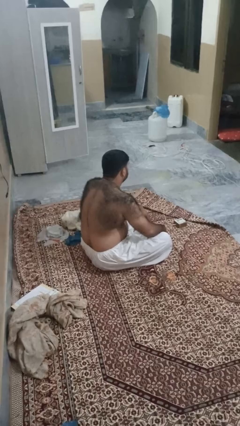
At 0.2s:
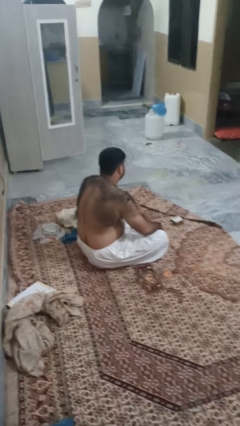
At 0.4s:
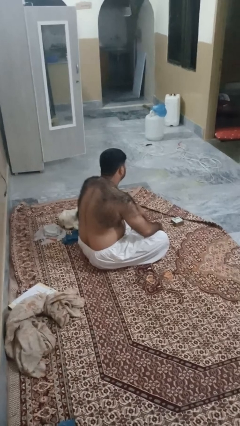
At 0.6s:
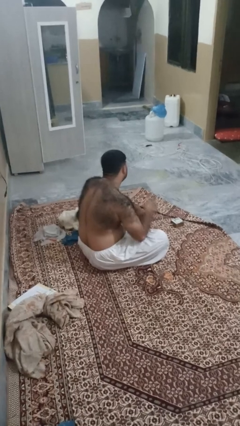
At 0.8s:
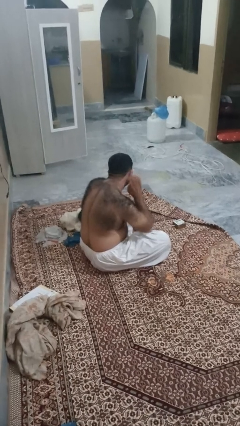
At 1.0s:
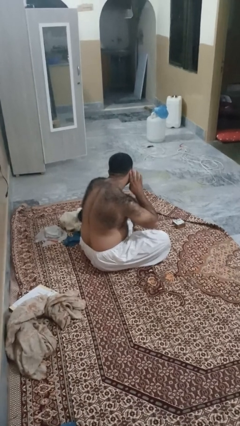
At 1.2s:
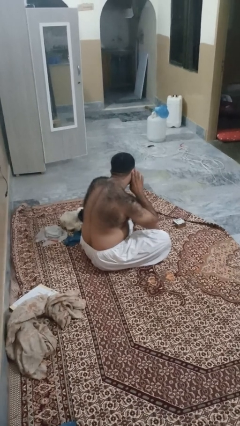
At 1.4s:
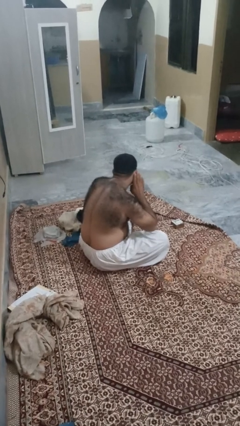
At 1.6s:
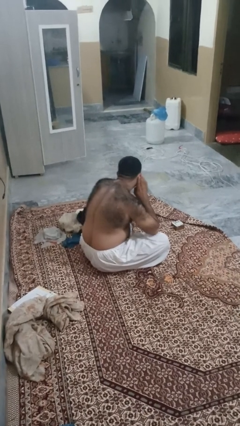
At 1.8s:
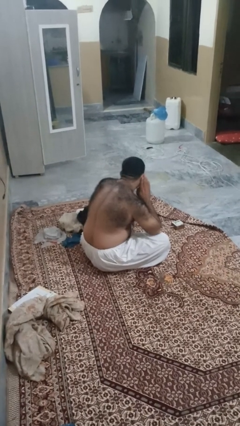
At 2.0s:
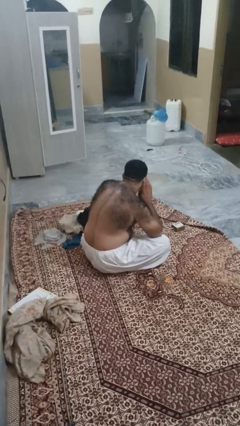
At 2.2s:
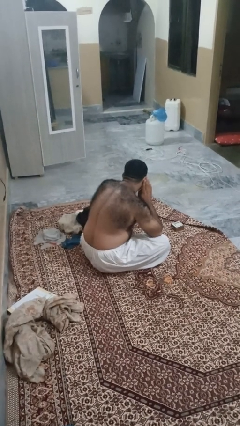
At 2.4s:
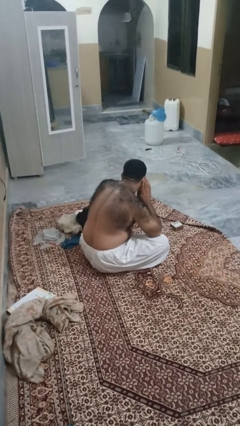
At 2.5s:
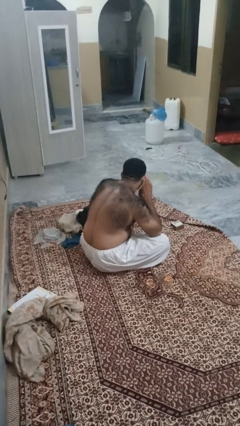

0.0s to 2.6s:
person gestures listen closely

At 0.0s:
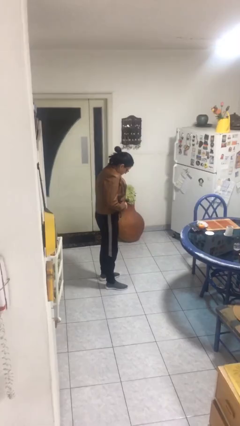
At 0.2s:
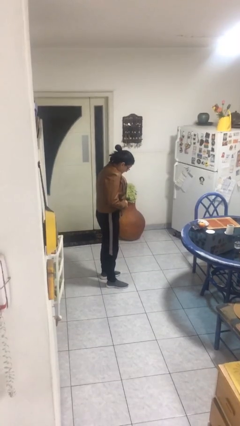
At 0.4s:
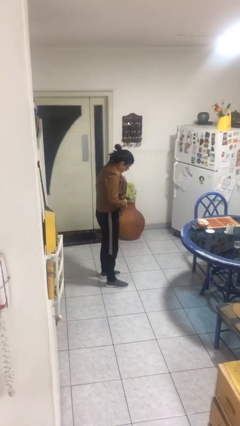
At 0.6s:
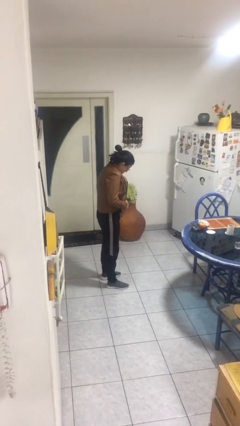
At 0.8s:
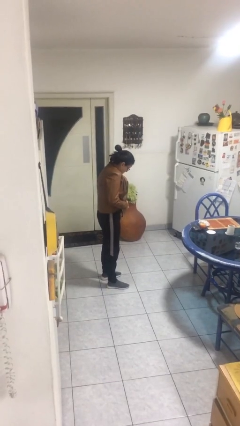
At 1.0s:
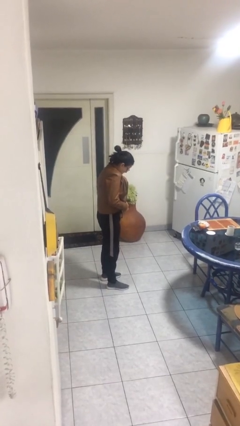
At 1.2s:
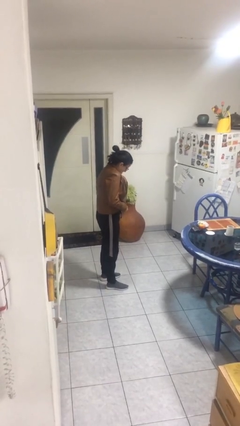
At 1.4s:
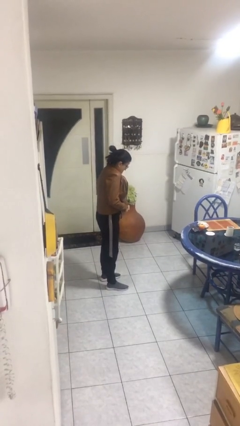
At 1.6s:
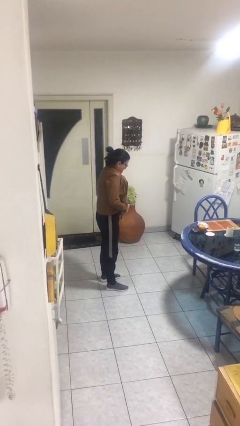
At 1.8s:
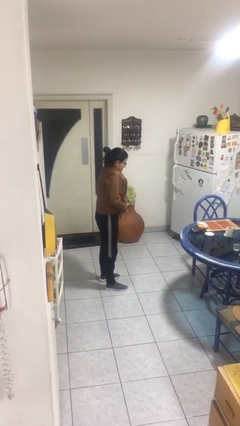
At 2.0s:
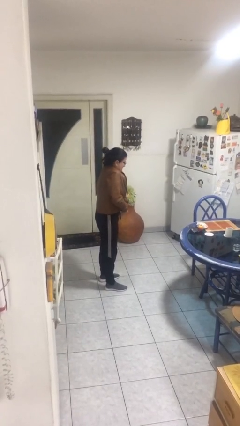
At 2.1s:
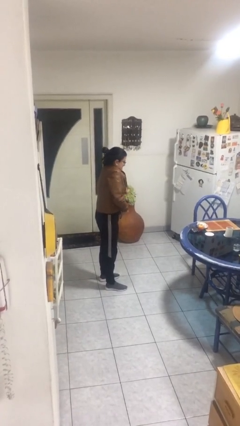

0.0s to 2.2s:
person zips up jacket

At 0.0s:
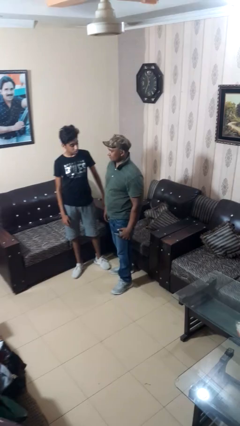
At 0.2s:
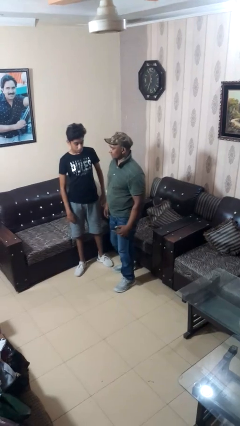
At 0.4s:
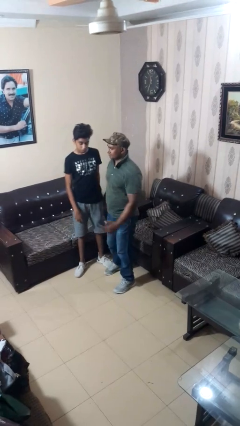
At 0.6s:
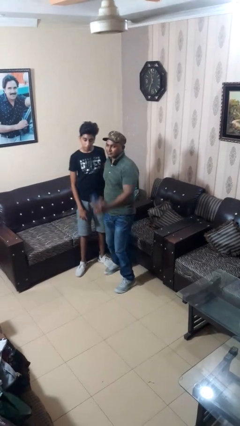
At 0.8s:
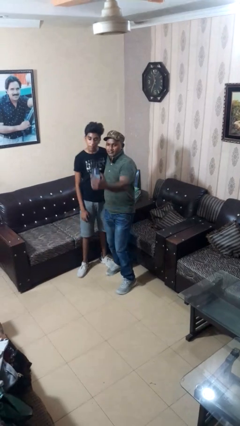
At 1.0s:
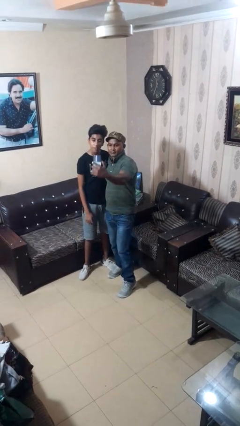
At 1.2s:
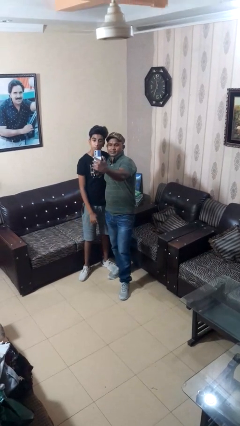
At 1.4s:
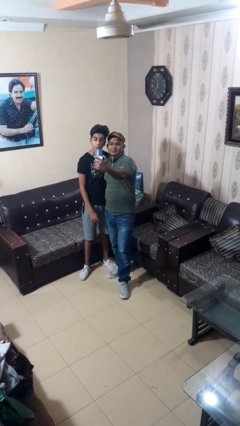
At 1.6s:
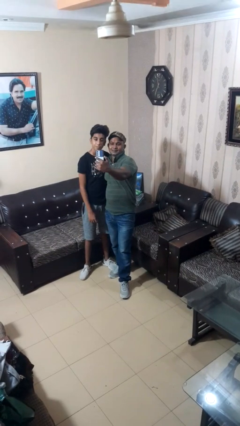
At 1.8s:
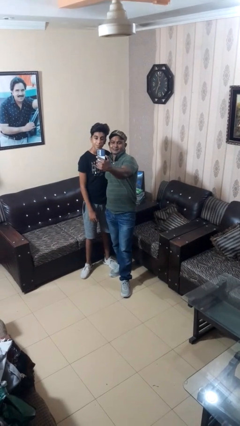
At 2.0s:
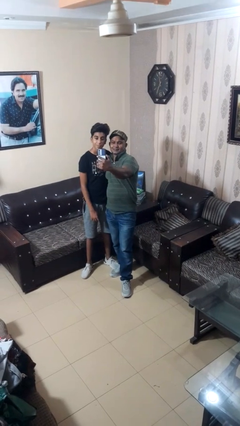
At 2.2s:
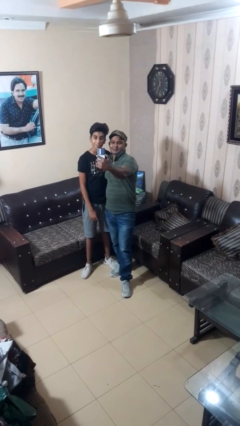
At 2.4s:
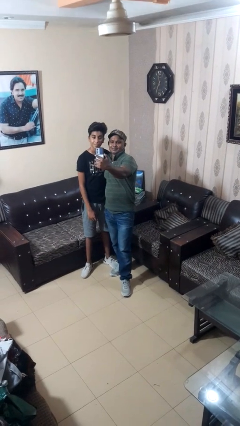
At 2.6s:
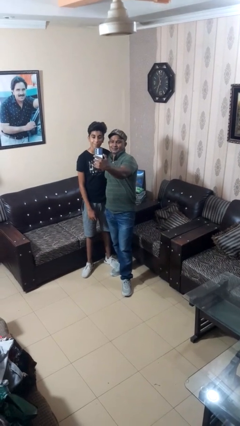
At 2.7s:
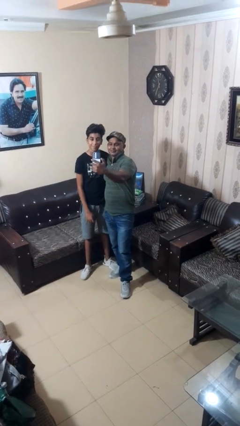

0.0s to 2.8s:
person takes selfie with person

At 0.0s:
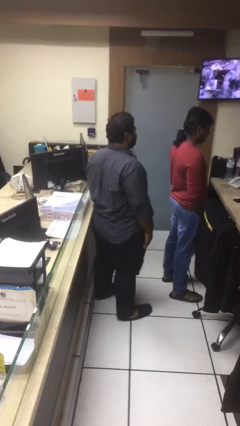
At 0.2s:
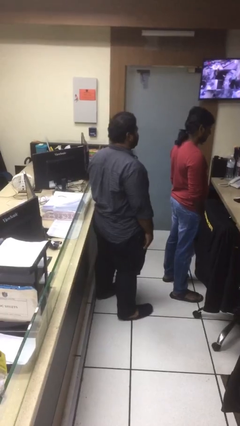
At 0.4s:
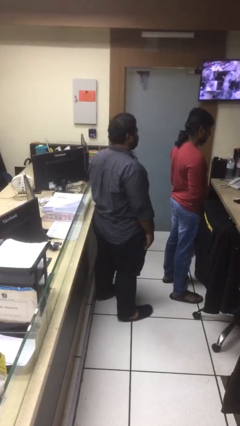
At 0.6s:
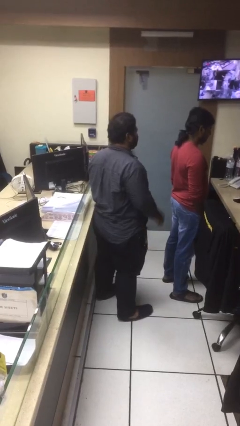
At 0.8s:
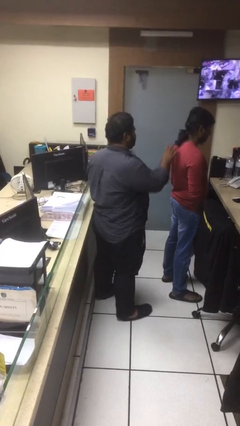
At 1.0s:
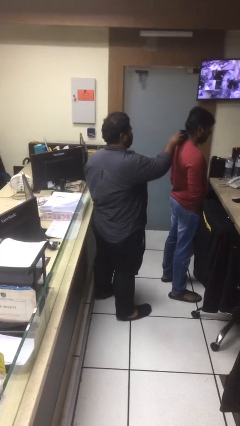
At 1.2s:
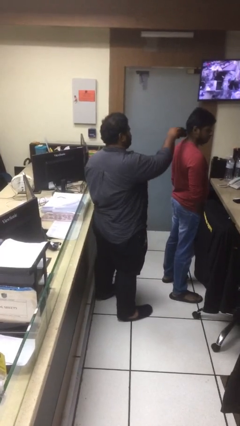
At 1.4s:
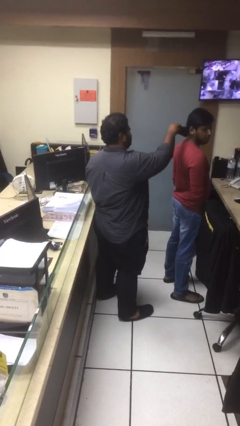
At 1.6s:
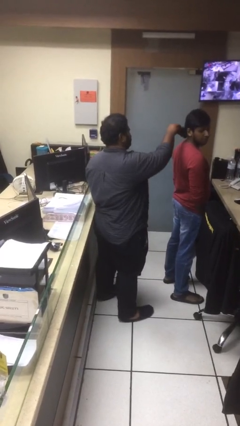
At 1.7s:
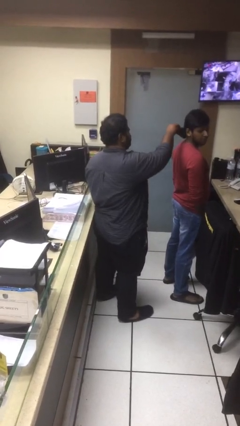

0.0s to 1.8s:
person grabs person by hair

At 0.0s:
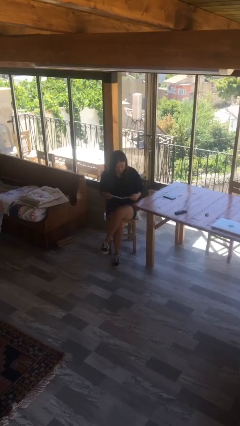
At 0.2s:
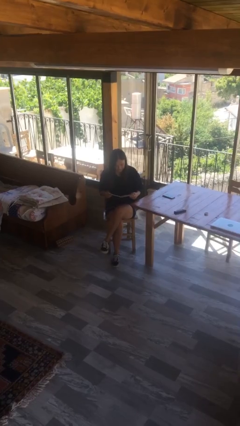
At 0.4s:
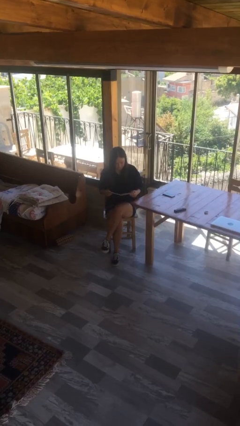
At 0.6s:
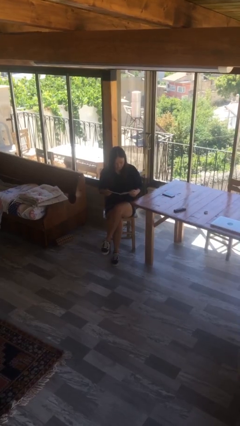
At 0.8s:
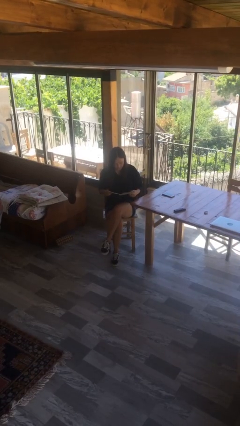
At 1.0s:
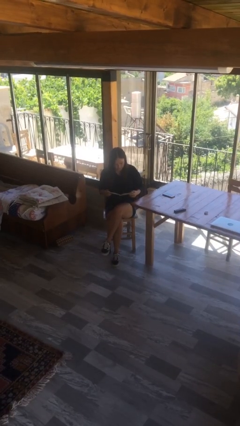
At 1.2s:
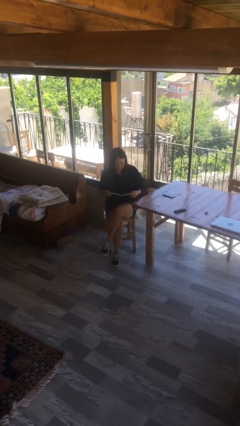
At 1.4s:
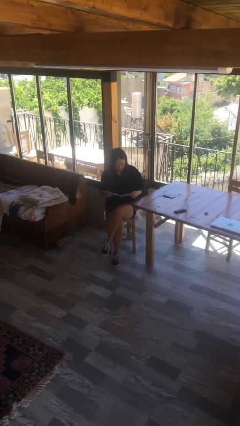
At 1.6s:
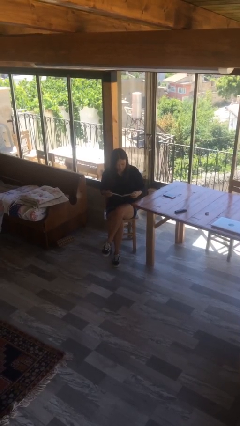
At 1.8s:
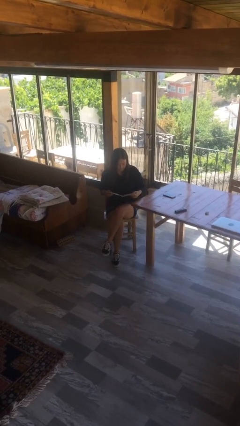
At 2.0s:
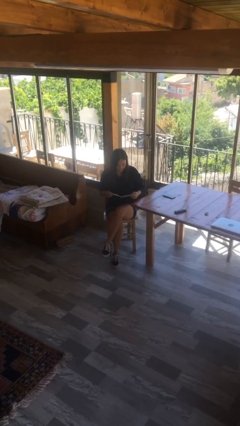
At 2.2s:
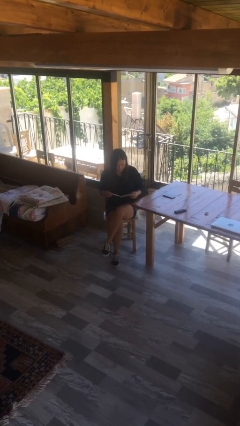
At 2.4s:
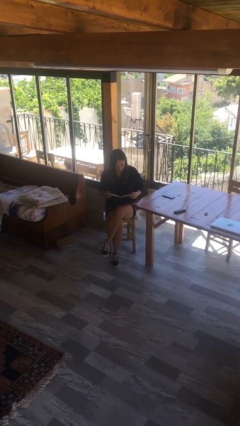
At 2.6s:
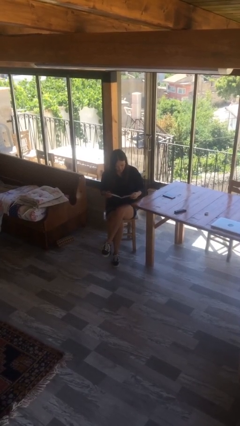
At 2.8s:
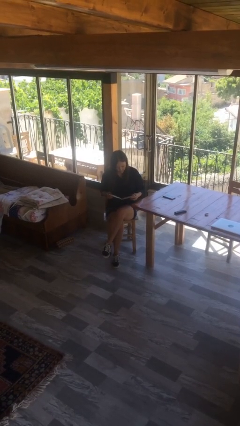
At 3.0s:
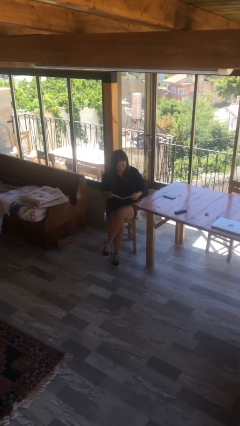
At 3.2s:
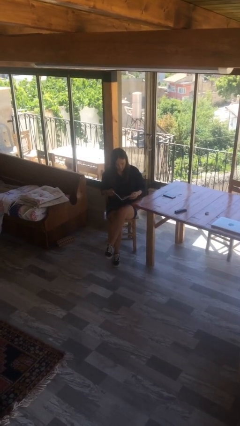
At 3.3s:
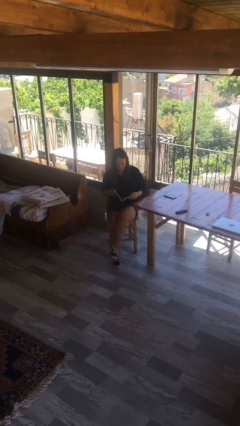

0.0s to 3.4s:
person reads document

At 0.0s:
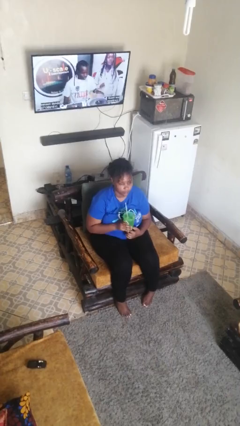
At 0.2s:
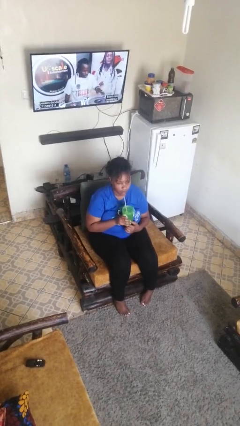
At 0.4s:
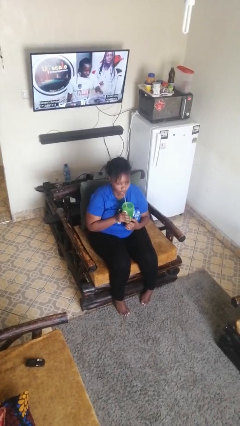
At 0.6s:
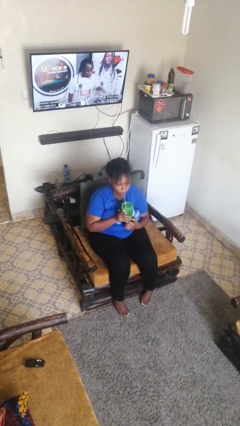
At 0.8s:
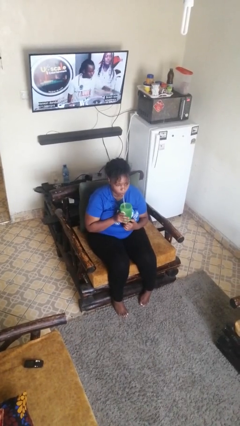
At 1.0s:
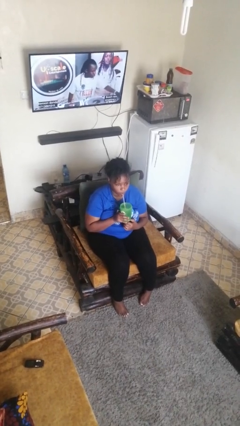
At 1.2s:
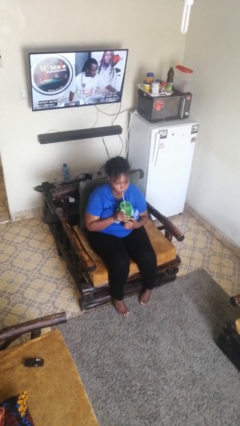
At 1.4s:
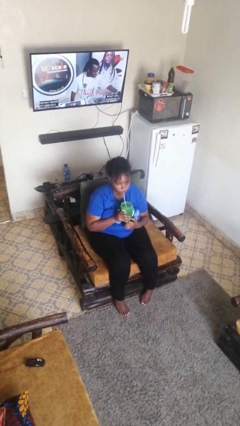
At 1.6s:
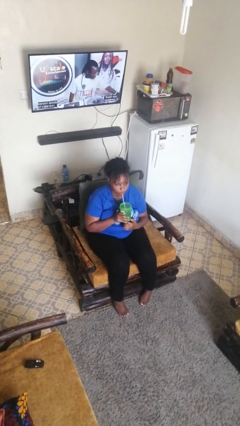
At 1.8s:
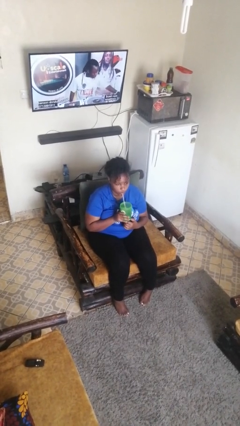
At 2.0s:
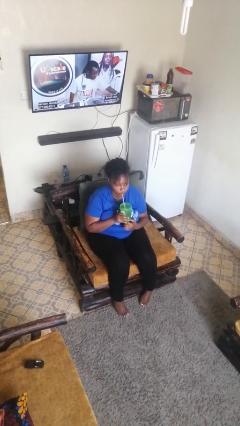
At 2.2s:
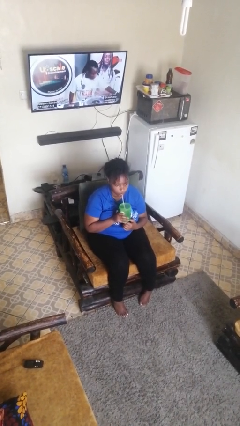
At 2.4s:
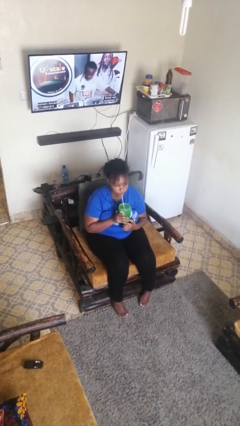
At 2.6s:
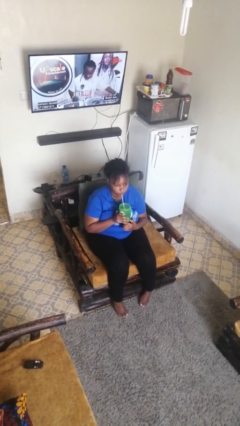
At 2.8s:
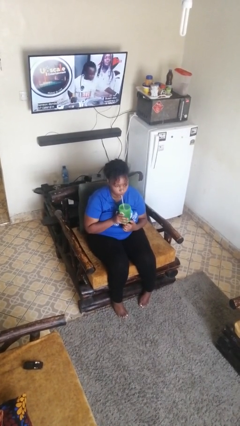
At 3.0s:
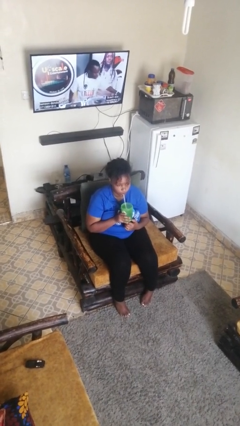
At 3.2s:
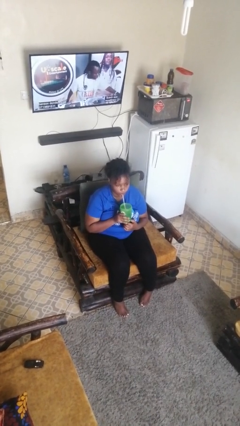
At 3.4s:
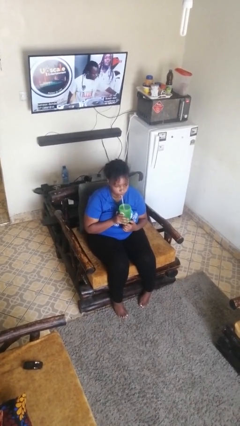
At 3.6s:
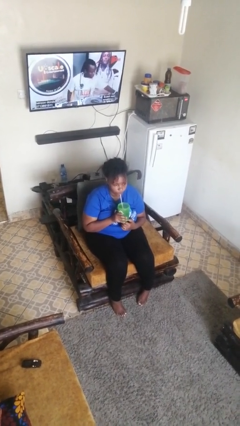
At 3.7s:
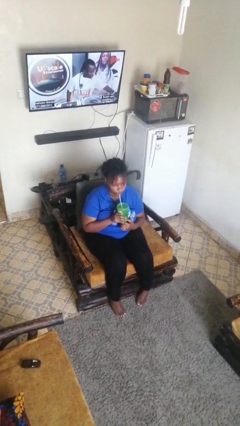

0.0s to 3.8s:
person drinks from straw

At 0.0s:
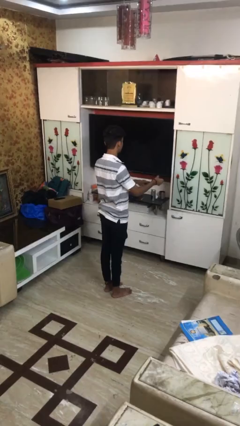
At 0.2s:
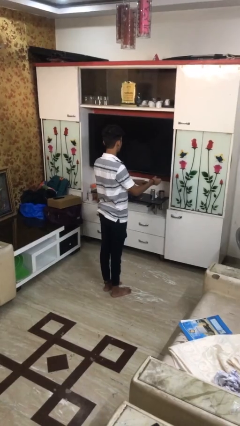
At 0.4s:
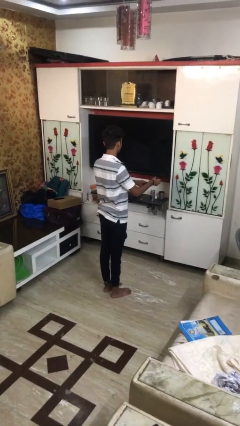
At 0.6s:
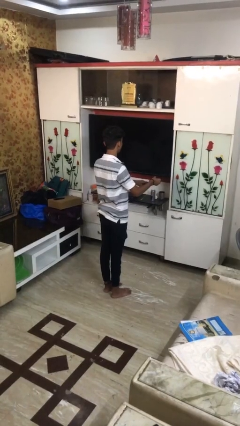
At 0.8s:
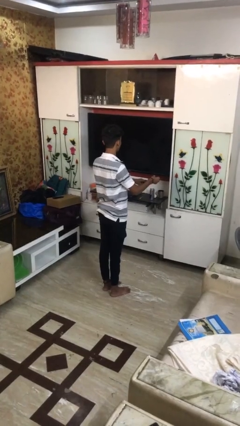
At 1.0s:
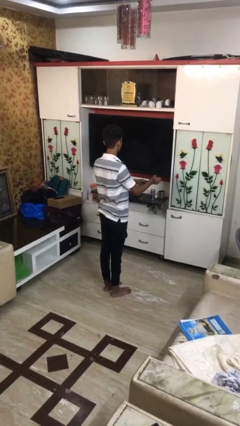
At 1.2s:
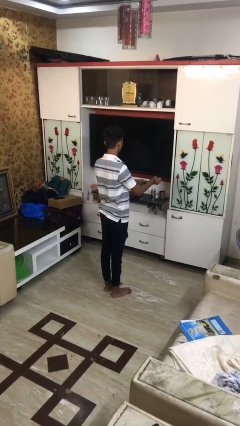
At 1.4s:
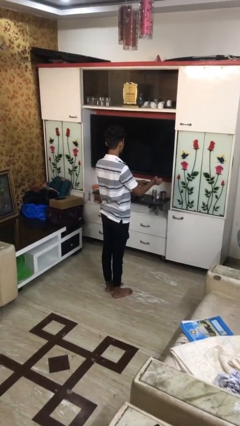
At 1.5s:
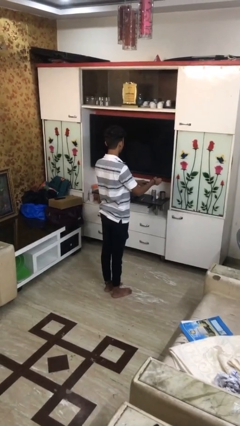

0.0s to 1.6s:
person clips fingernails
